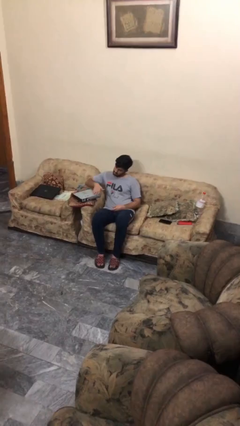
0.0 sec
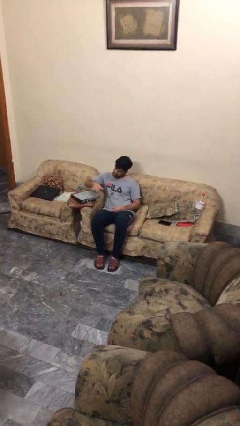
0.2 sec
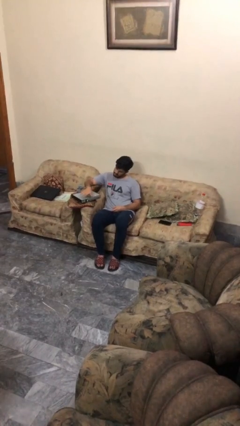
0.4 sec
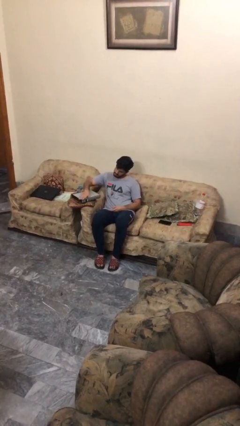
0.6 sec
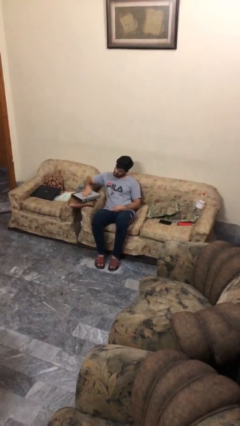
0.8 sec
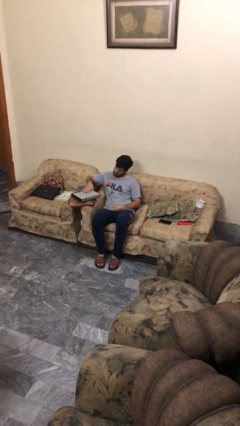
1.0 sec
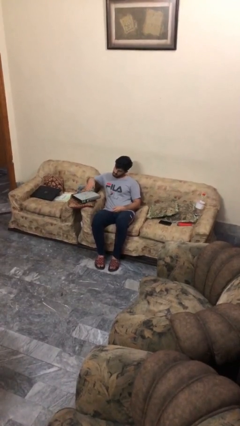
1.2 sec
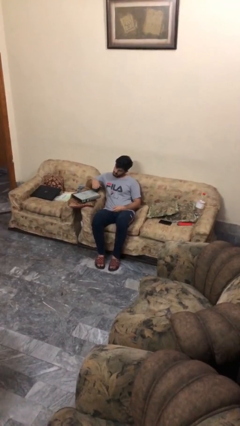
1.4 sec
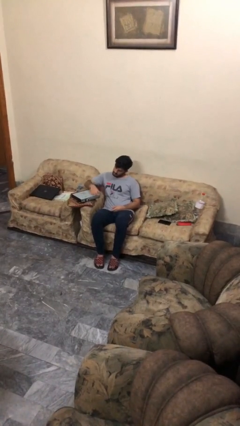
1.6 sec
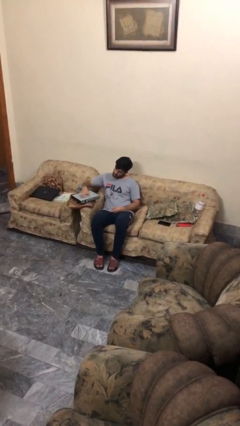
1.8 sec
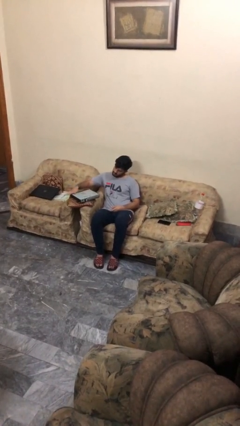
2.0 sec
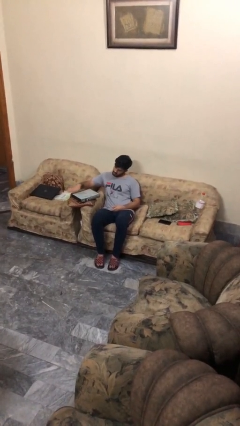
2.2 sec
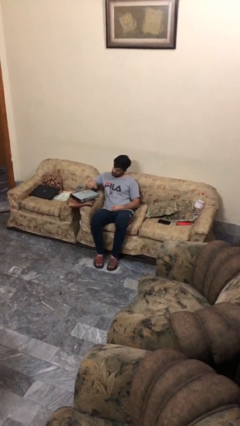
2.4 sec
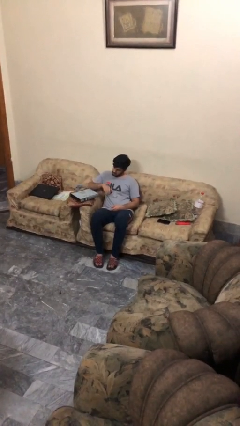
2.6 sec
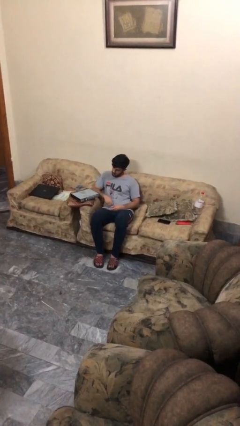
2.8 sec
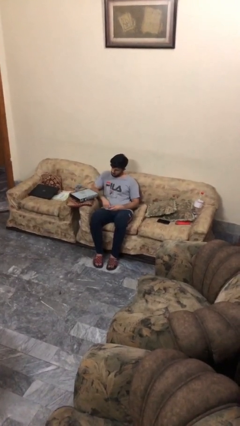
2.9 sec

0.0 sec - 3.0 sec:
person waves hand over object

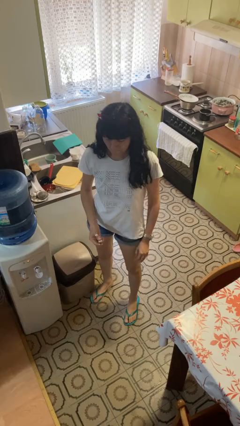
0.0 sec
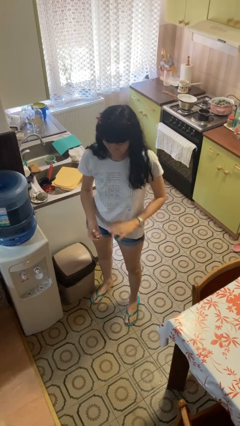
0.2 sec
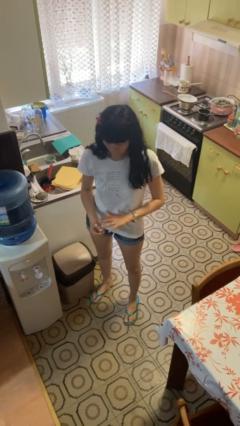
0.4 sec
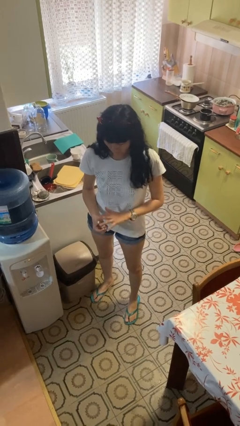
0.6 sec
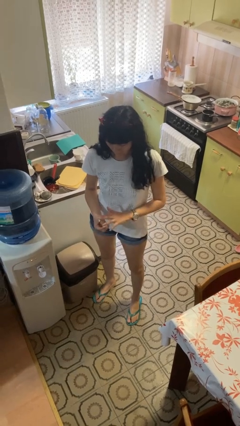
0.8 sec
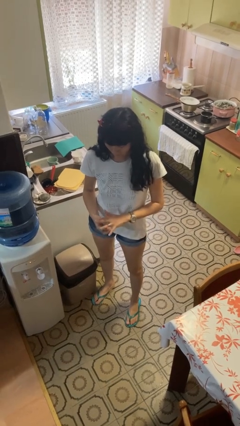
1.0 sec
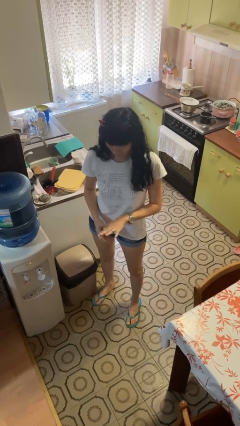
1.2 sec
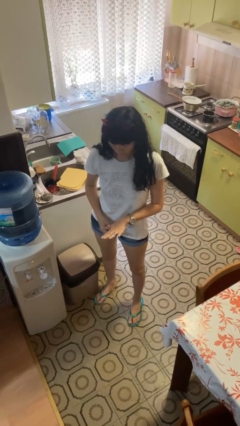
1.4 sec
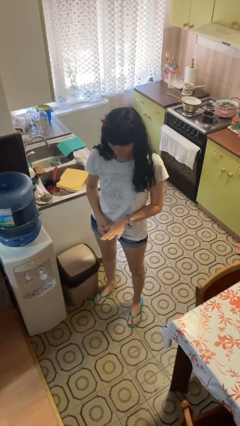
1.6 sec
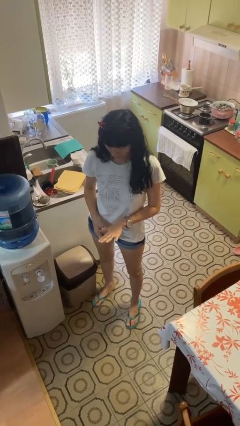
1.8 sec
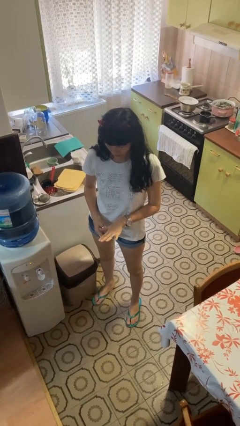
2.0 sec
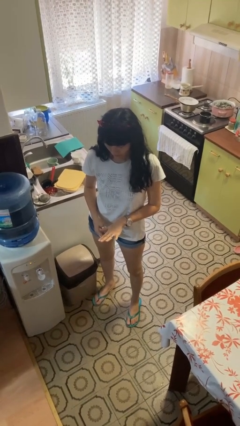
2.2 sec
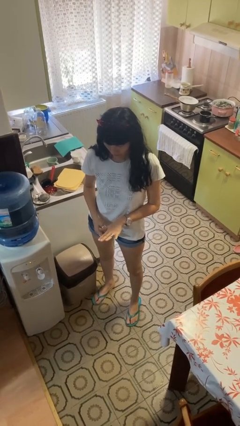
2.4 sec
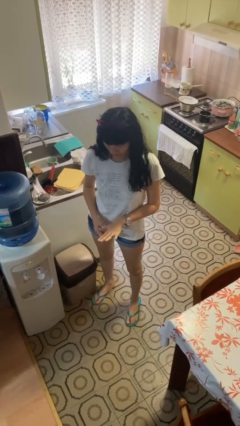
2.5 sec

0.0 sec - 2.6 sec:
person puts on ring

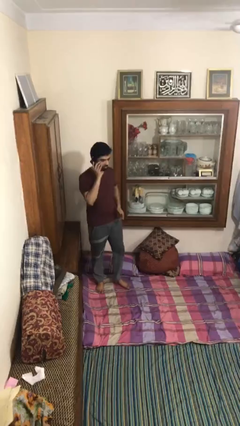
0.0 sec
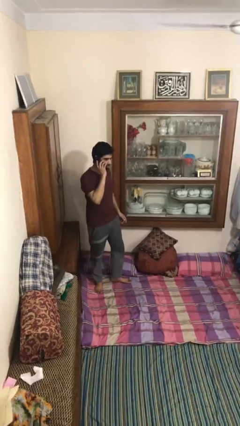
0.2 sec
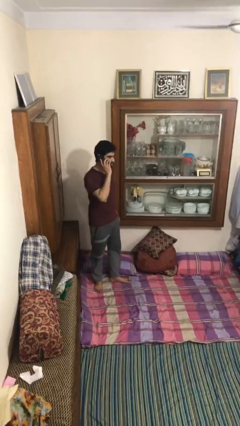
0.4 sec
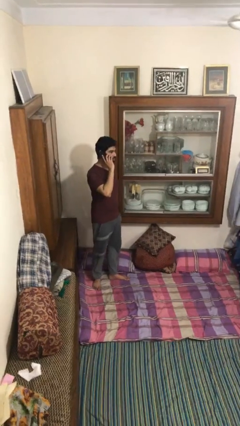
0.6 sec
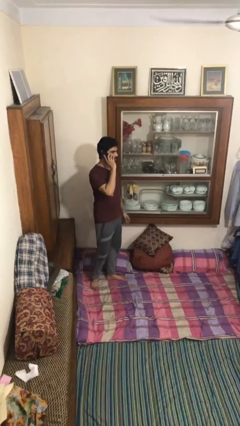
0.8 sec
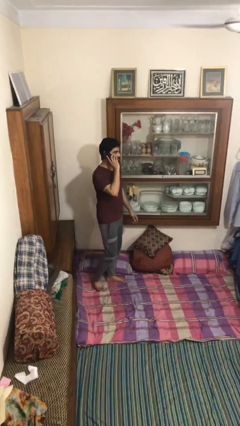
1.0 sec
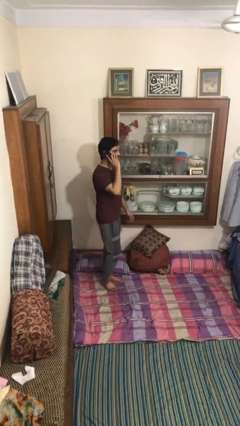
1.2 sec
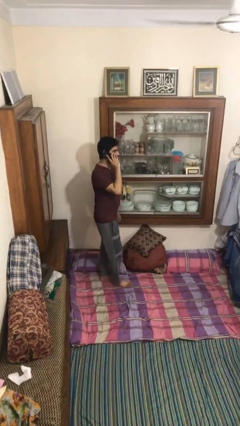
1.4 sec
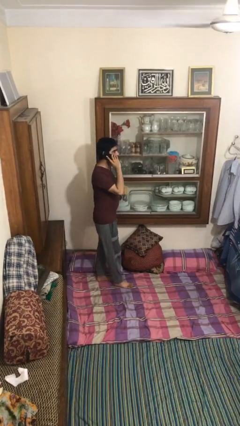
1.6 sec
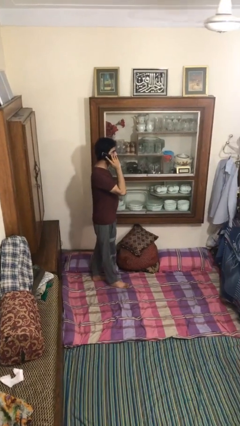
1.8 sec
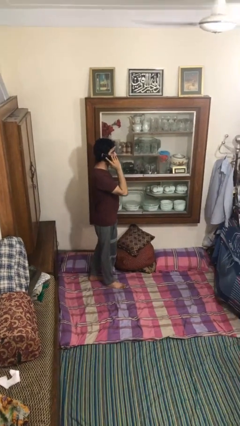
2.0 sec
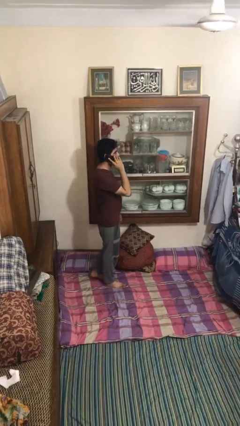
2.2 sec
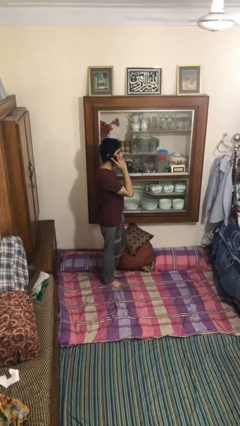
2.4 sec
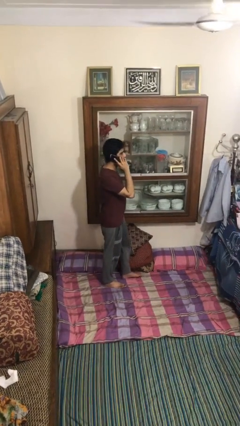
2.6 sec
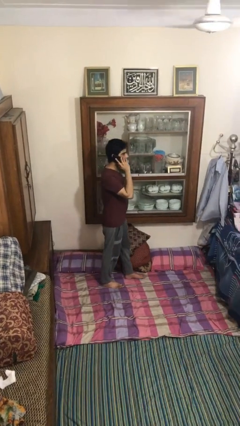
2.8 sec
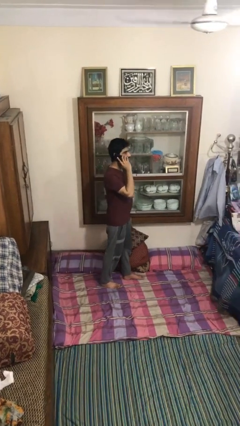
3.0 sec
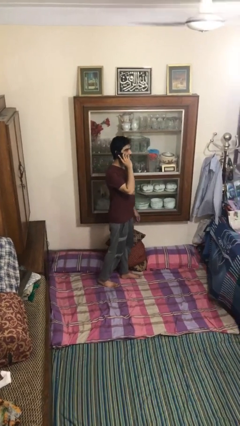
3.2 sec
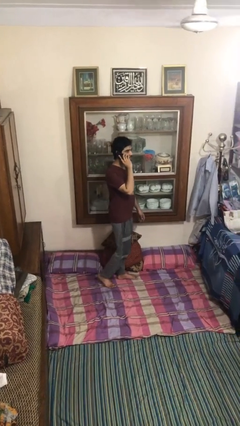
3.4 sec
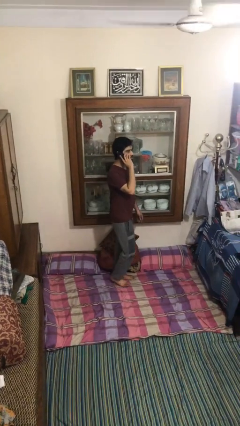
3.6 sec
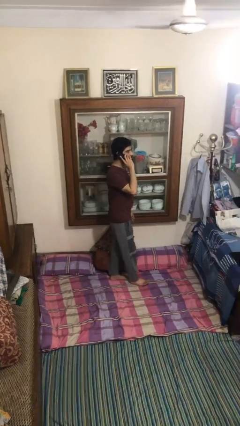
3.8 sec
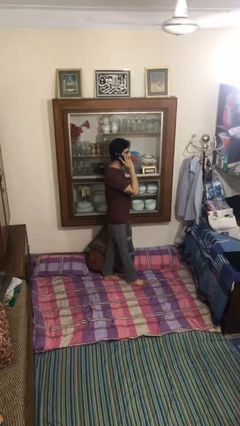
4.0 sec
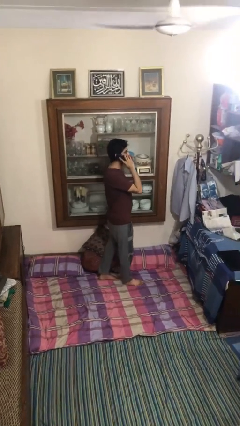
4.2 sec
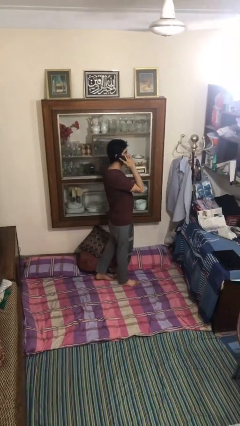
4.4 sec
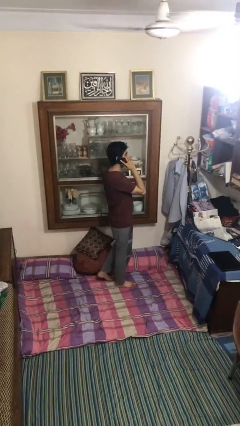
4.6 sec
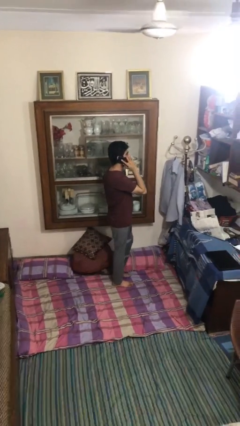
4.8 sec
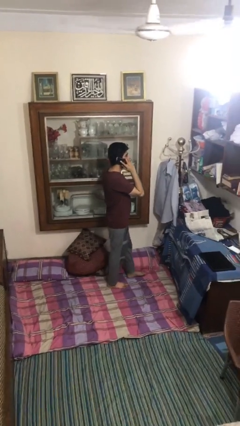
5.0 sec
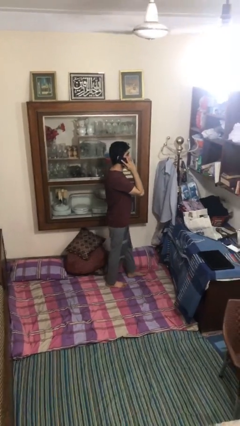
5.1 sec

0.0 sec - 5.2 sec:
person talks on phone

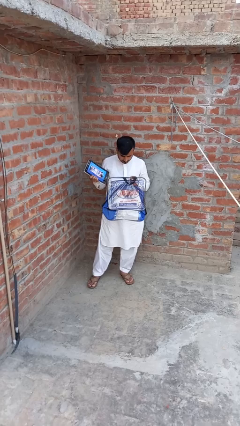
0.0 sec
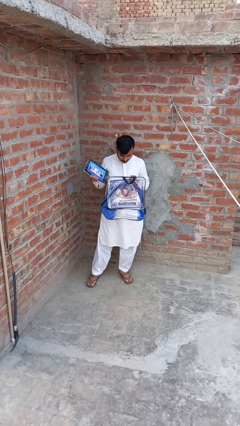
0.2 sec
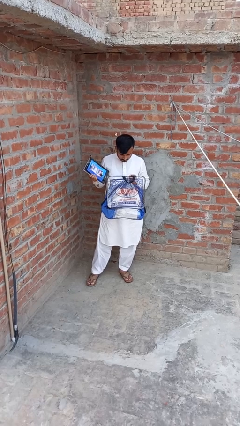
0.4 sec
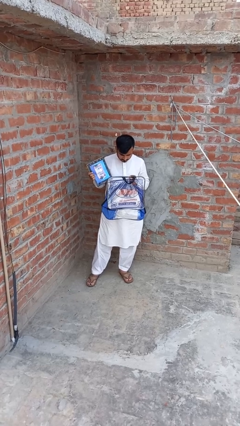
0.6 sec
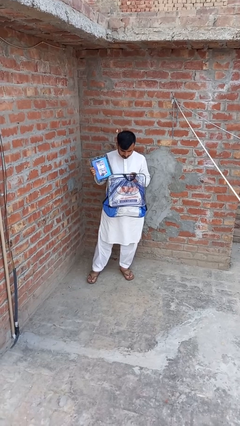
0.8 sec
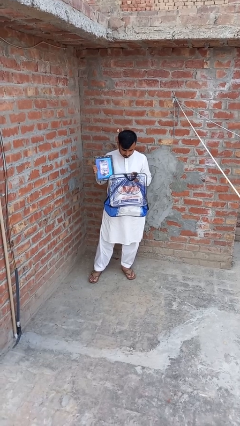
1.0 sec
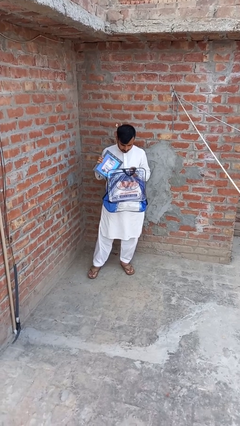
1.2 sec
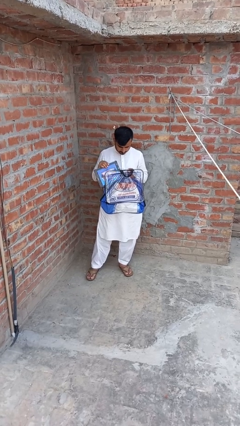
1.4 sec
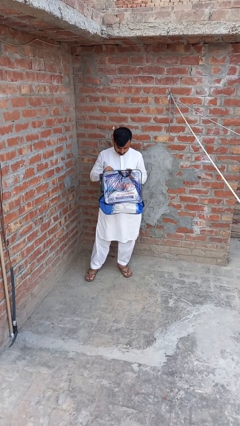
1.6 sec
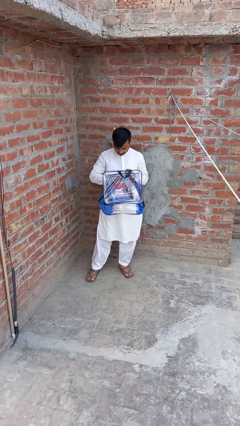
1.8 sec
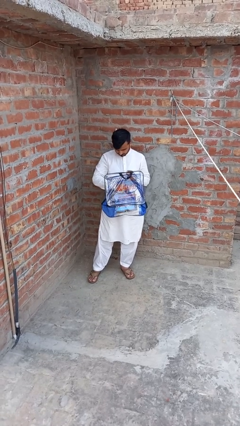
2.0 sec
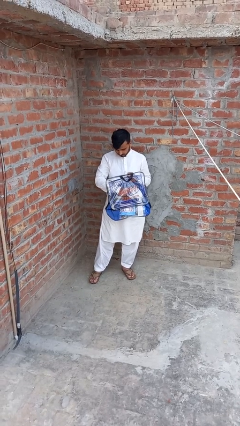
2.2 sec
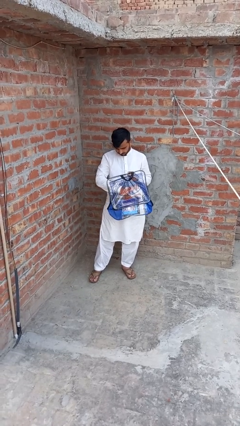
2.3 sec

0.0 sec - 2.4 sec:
person puts object into backpack

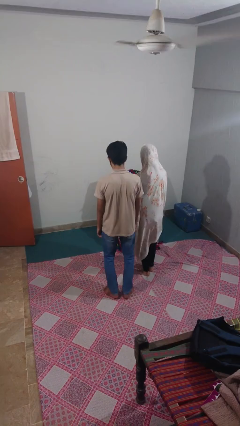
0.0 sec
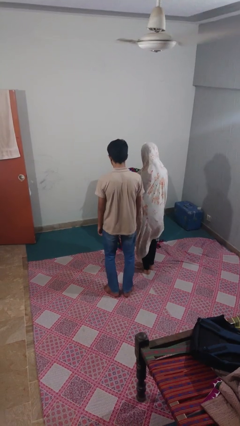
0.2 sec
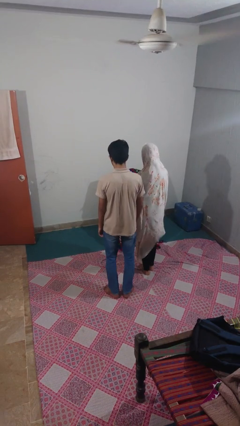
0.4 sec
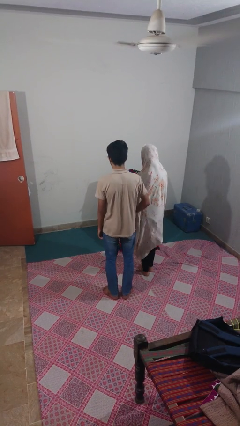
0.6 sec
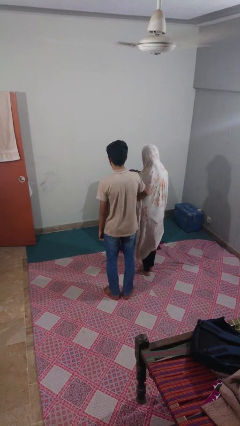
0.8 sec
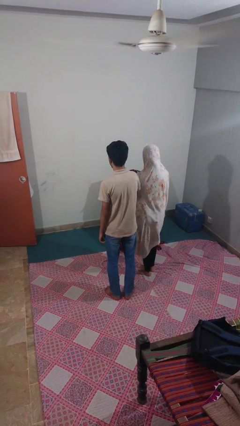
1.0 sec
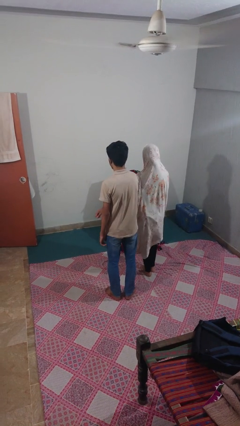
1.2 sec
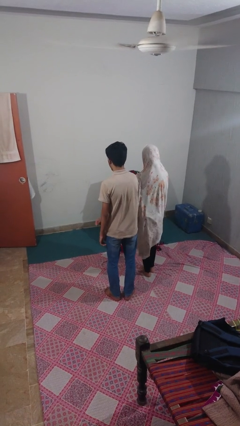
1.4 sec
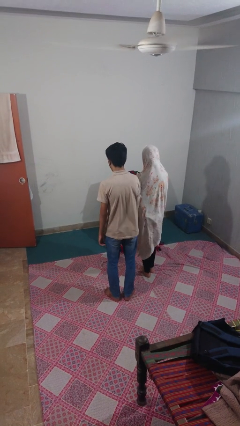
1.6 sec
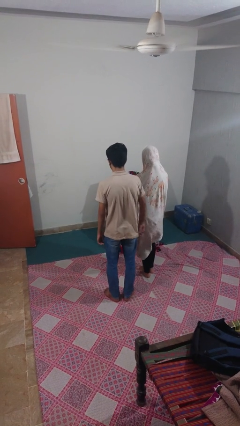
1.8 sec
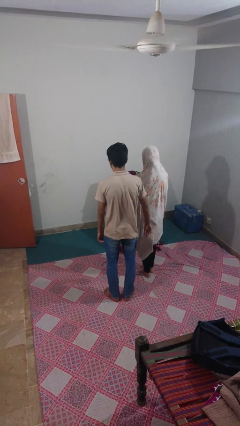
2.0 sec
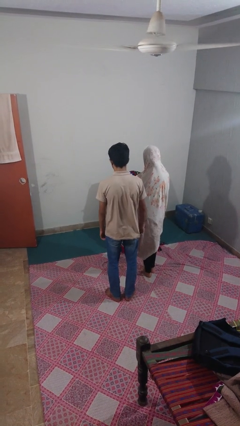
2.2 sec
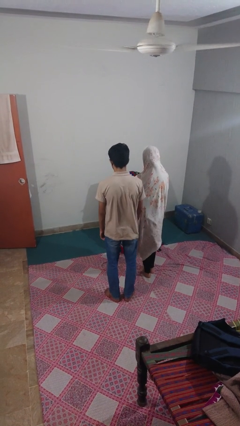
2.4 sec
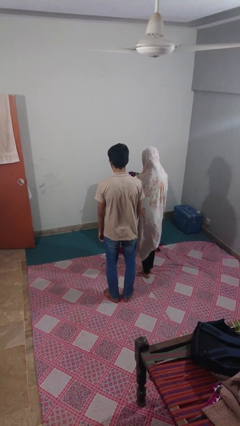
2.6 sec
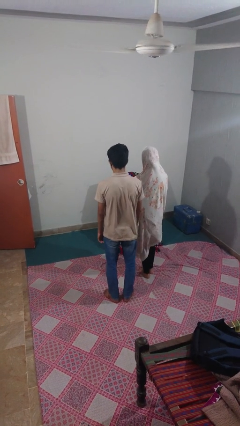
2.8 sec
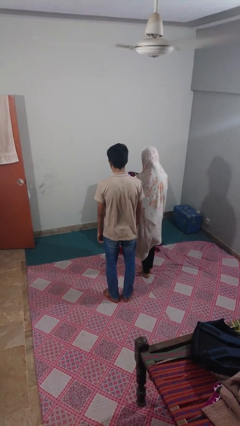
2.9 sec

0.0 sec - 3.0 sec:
person nudges person with elbow

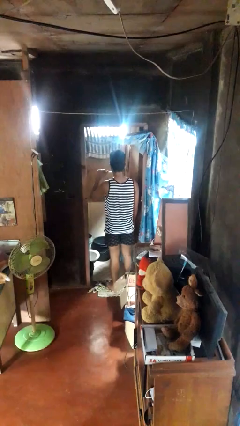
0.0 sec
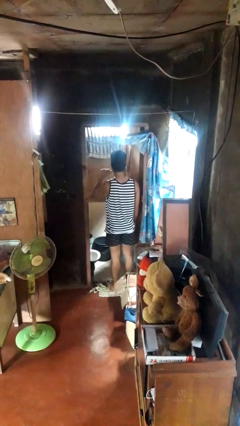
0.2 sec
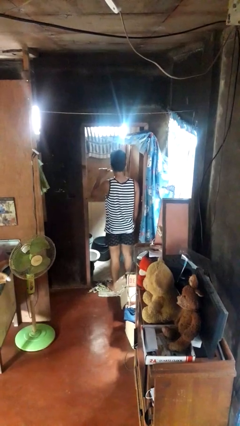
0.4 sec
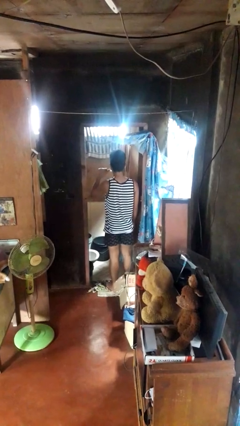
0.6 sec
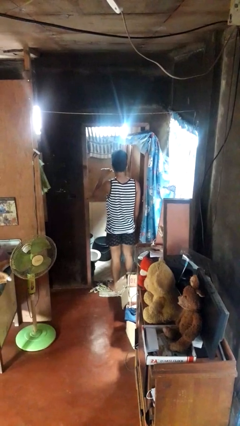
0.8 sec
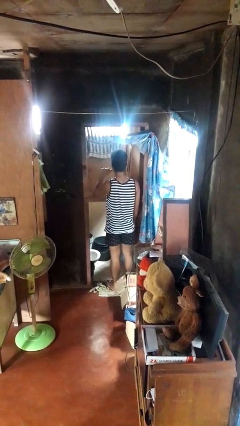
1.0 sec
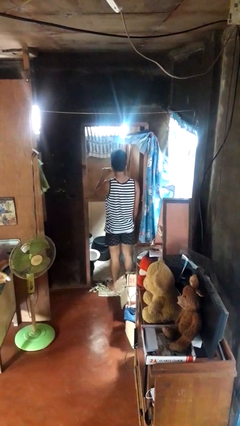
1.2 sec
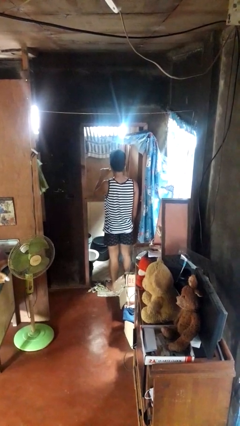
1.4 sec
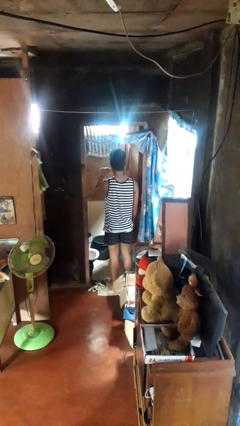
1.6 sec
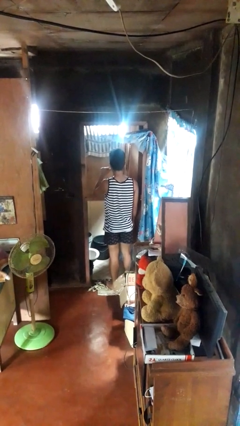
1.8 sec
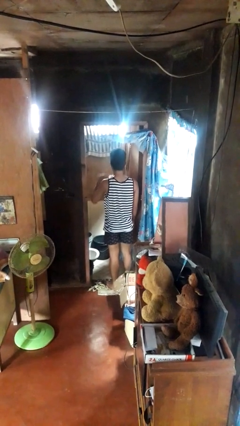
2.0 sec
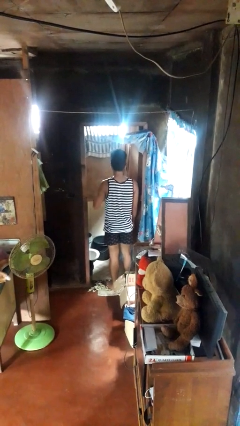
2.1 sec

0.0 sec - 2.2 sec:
person brushes teeth
